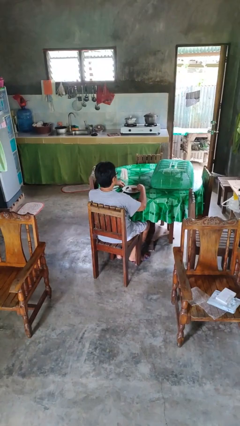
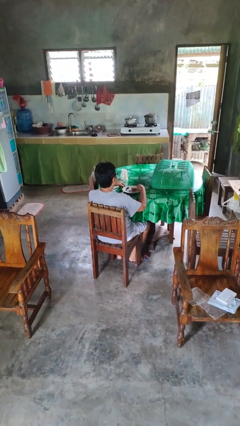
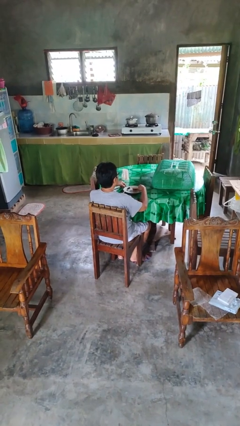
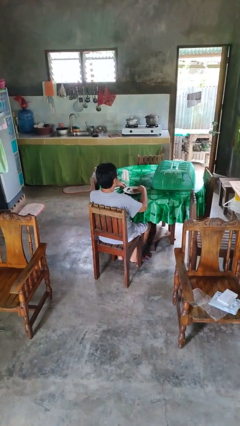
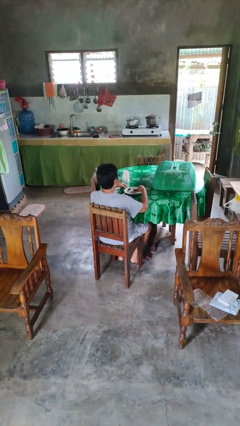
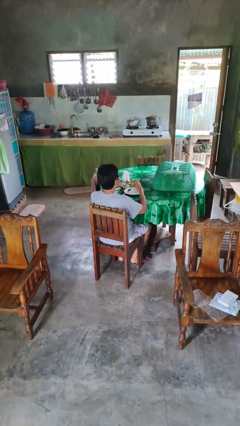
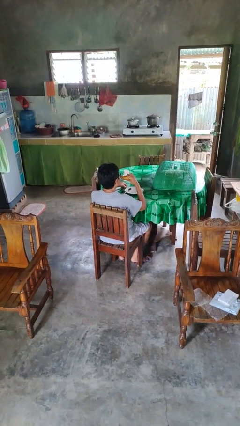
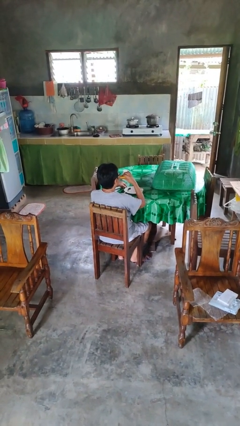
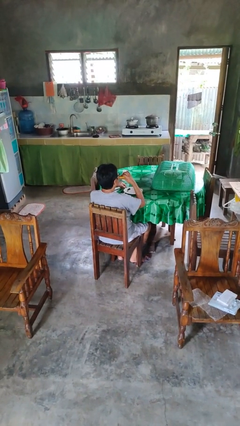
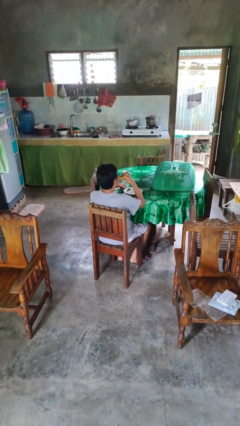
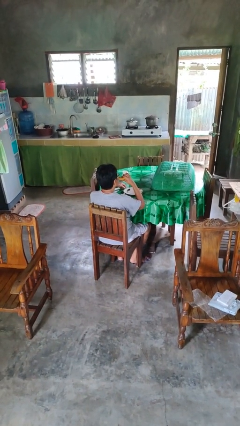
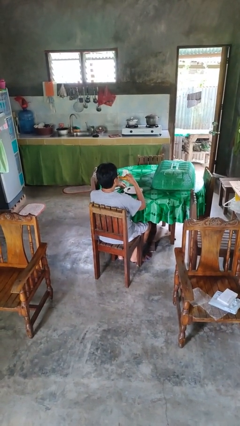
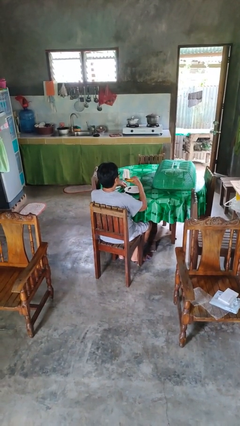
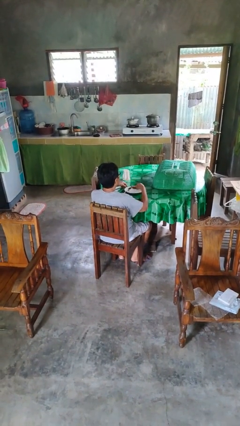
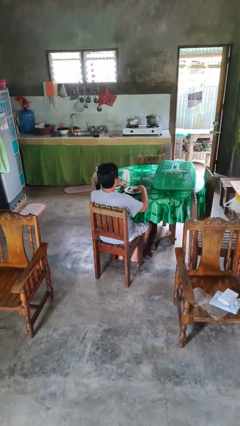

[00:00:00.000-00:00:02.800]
person eats with hands

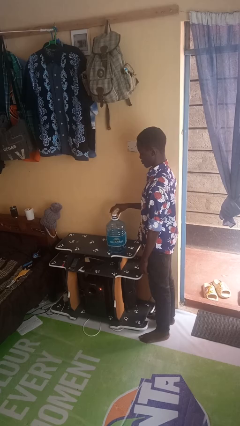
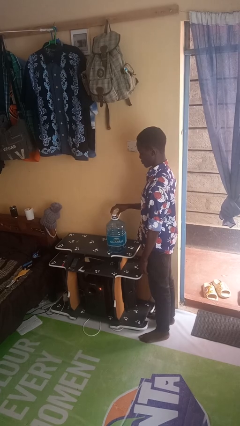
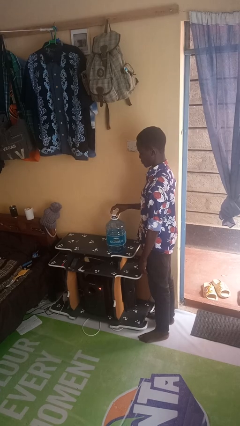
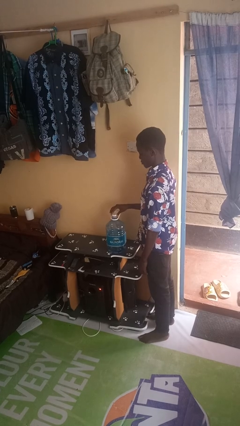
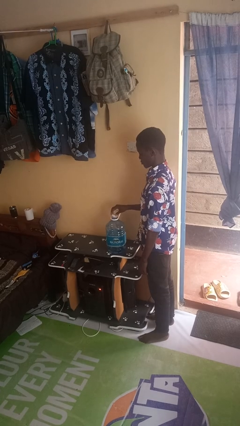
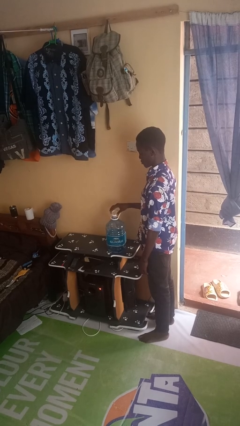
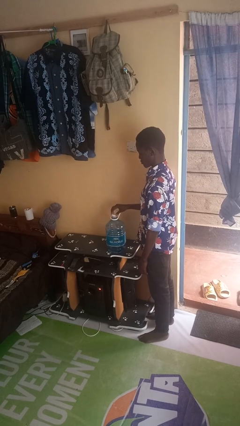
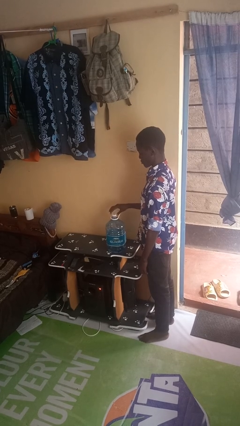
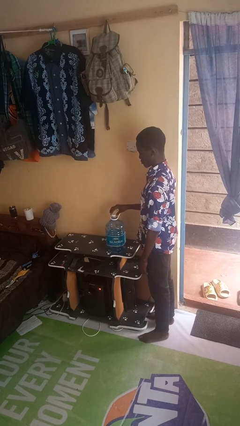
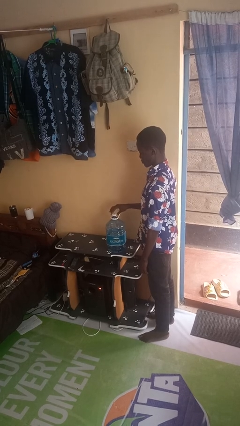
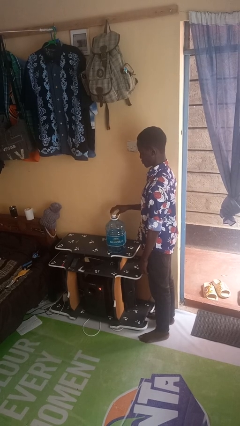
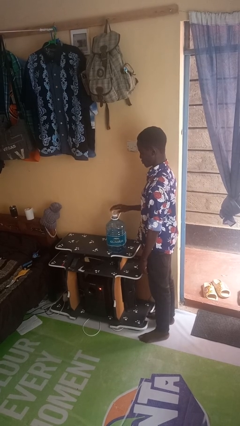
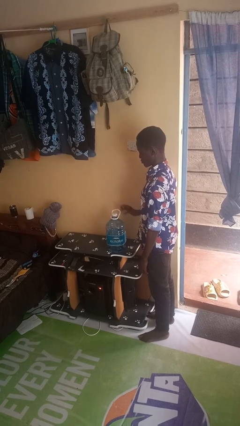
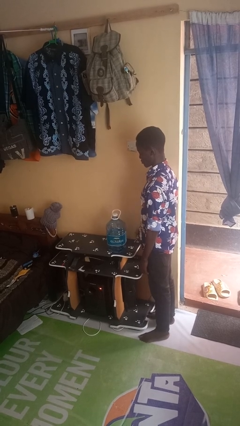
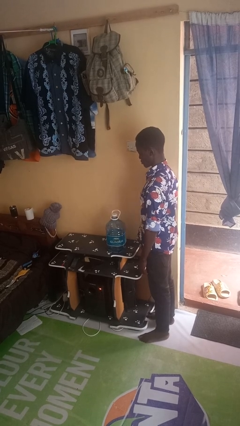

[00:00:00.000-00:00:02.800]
person screws lid to bottle

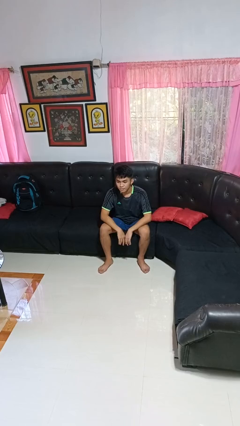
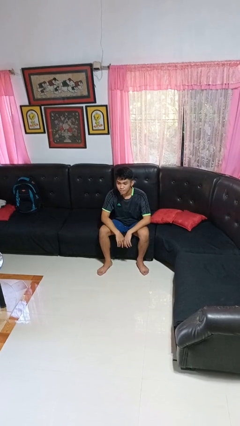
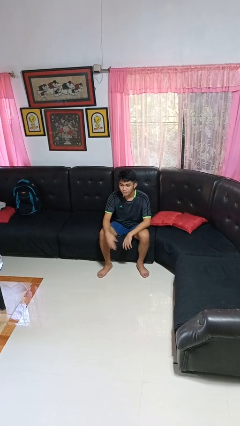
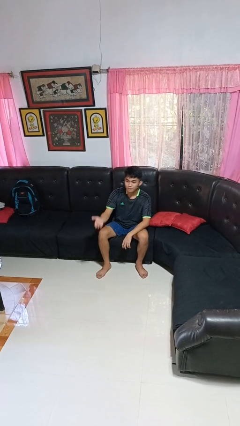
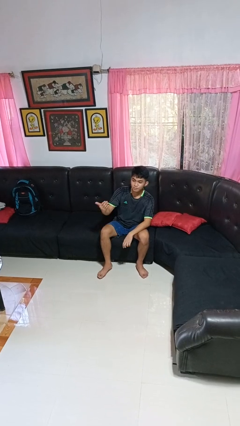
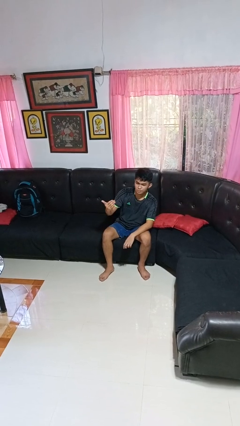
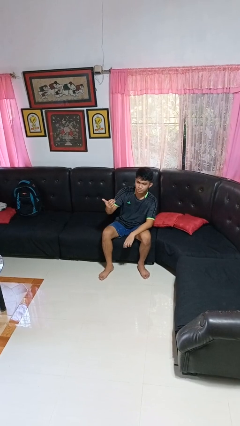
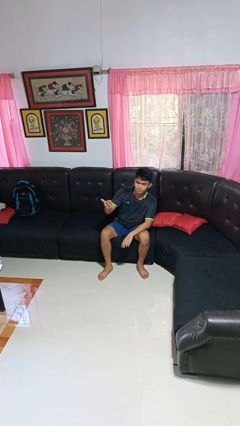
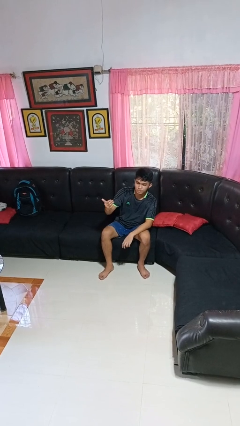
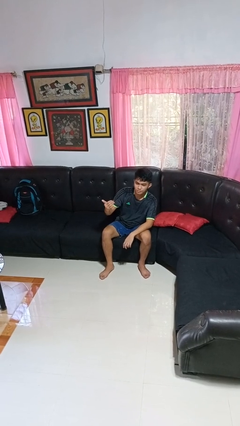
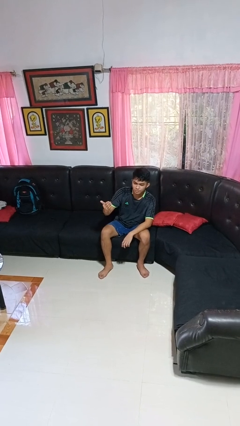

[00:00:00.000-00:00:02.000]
person gestures come here

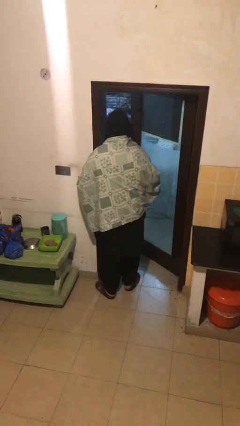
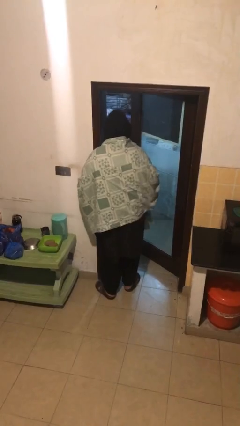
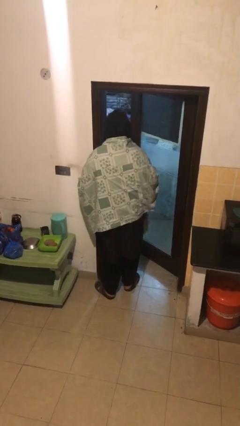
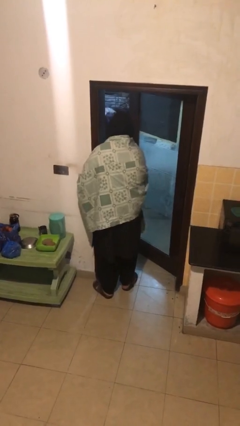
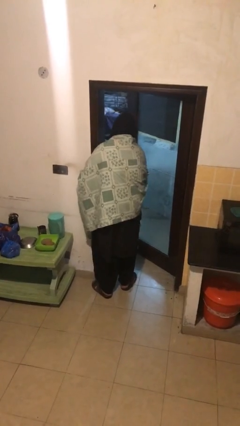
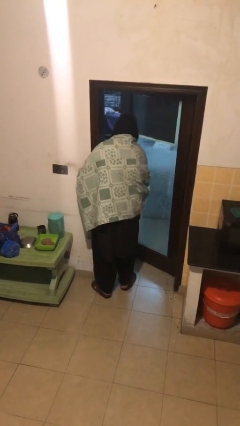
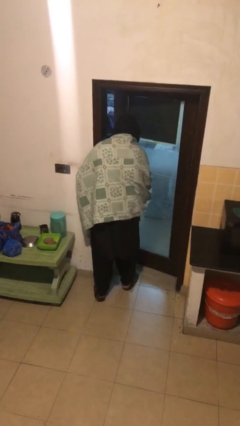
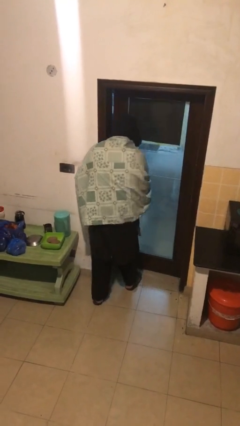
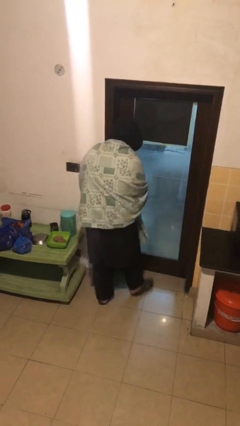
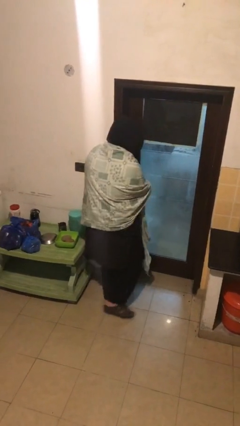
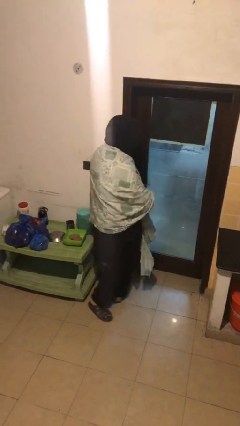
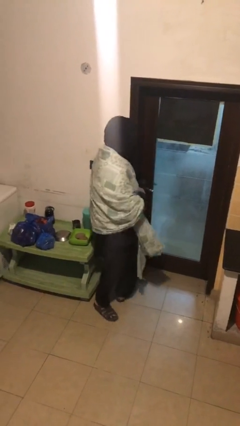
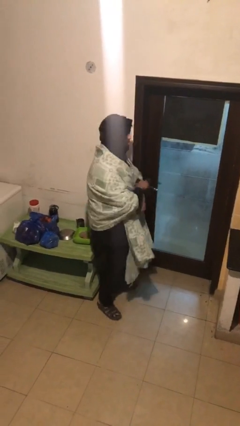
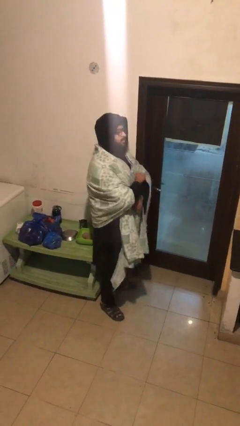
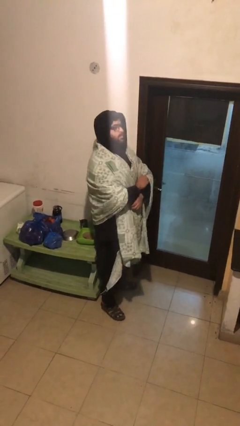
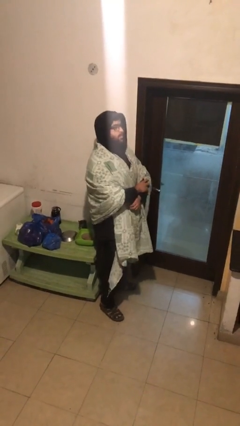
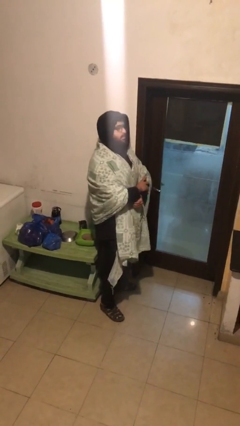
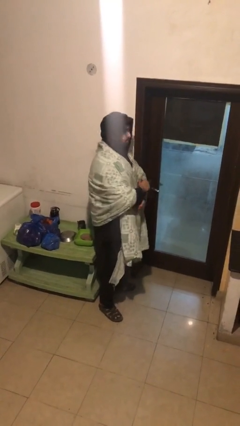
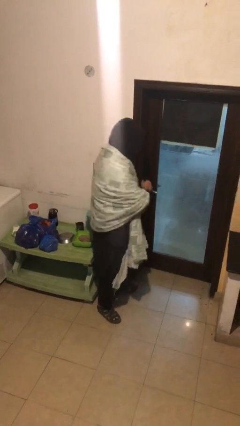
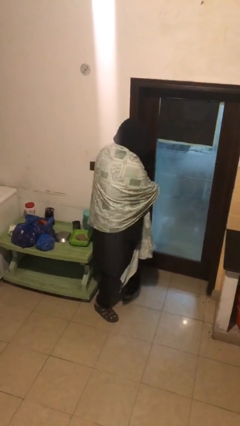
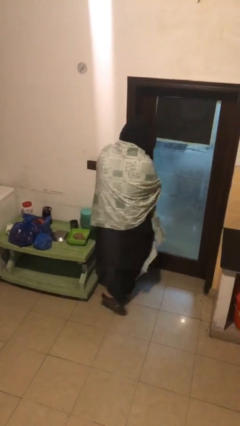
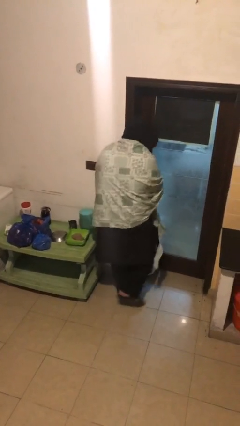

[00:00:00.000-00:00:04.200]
person closes facility door

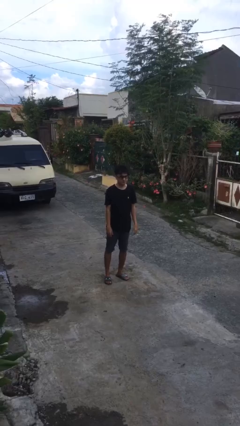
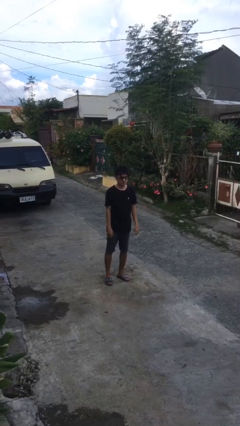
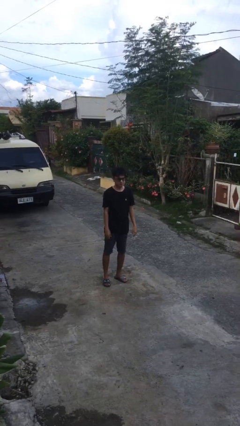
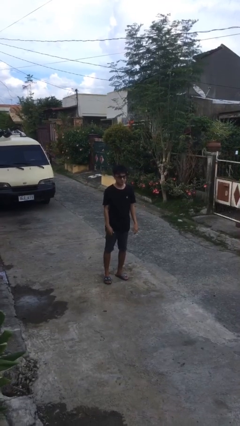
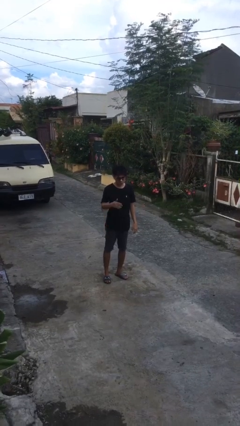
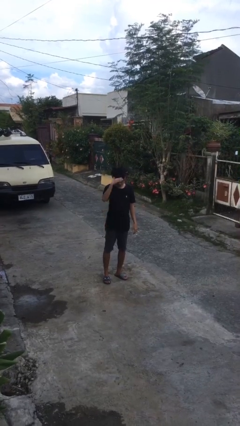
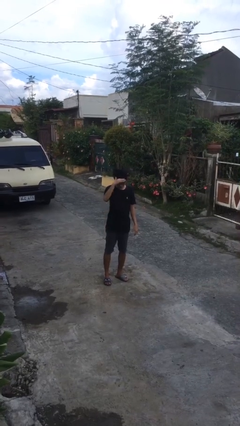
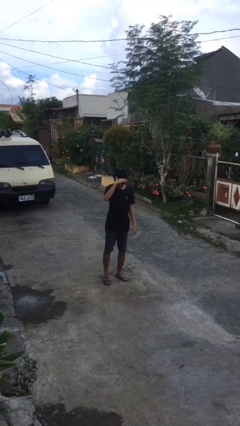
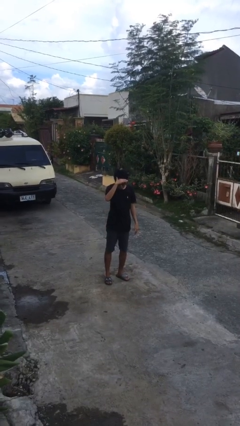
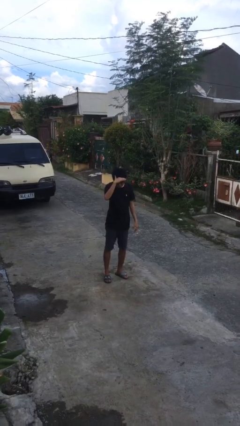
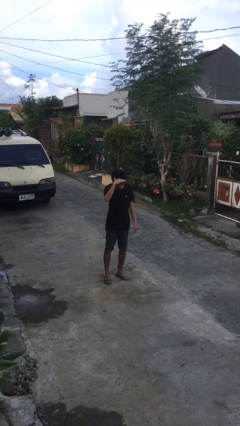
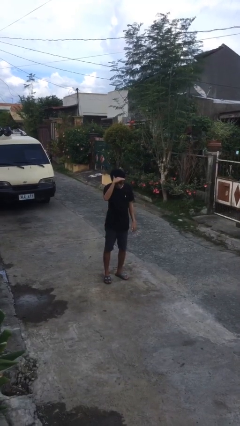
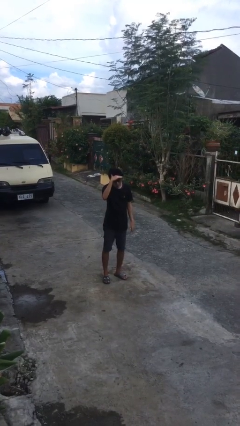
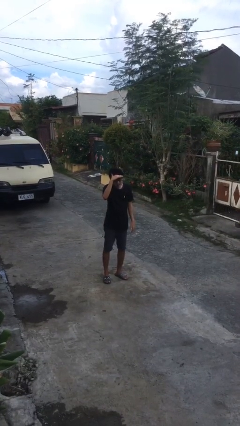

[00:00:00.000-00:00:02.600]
person shades eyes

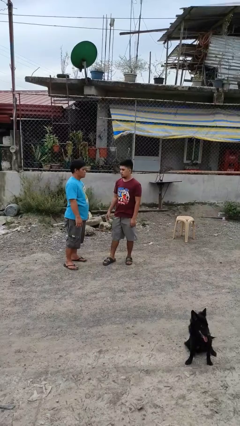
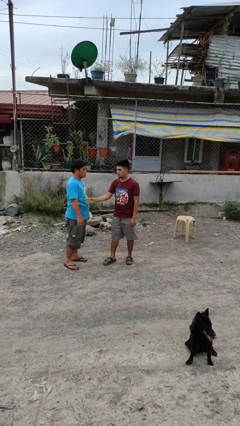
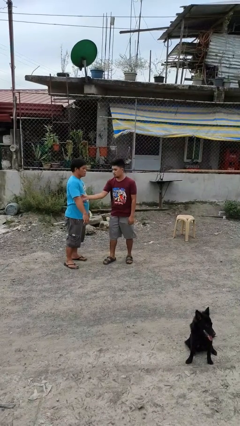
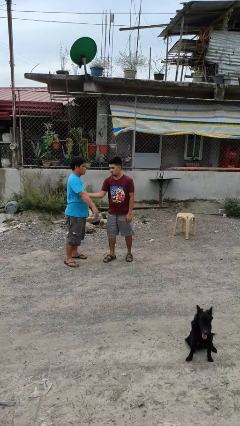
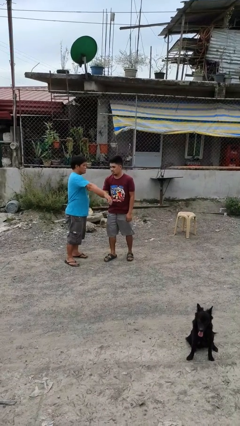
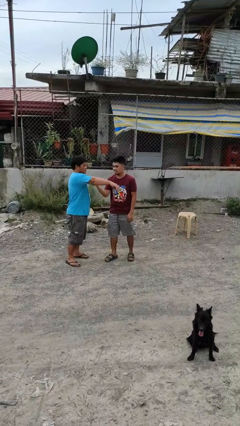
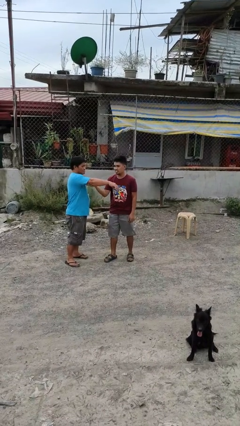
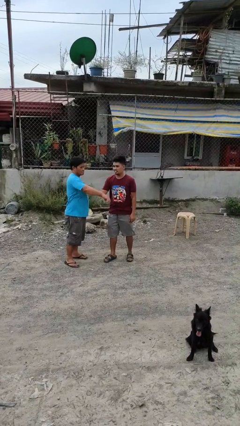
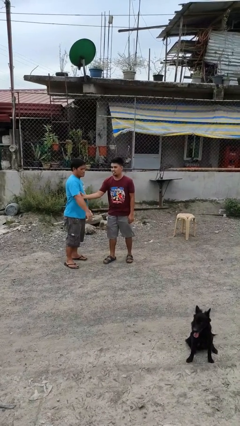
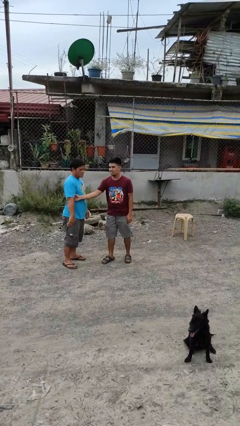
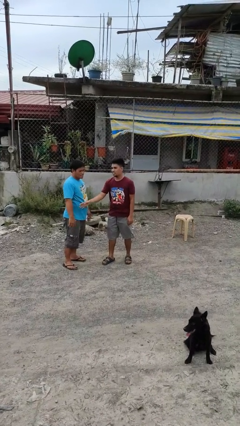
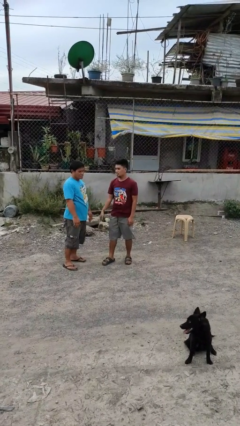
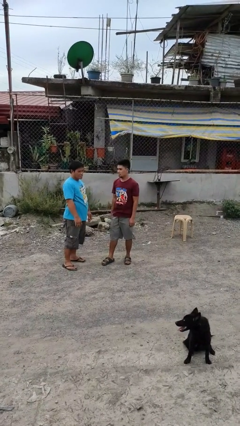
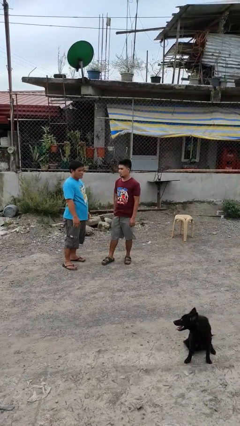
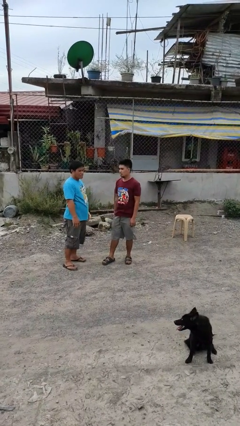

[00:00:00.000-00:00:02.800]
person grabs person by bicep
